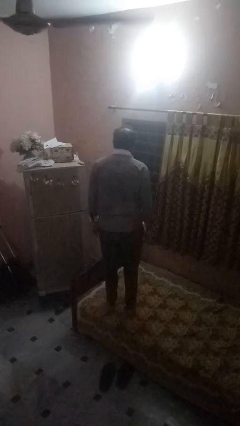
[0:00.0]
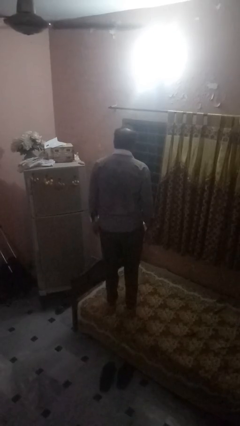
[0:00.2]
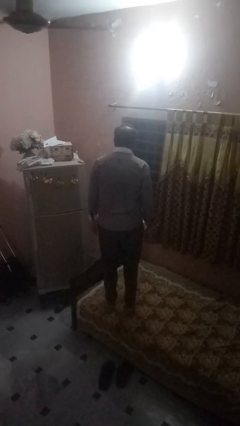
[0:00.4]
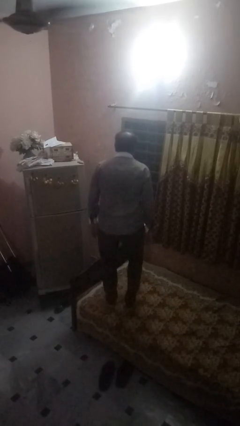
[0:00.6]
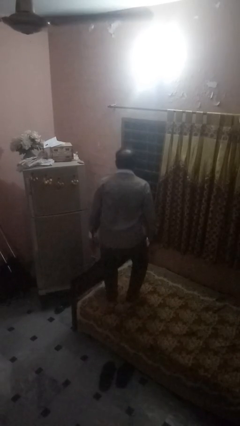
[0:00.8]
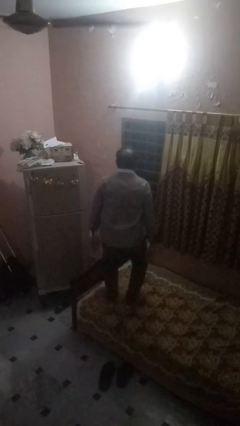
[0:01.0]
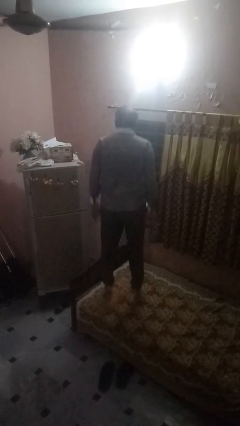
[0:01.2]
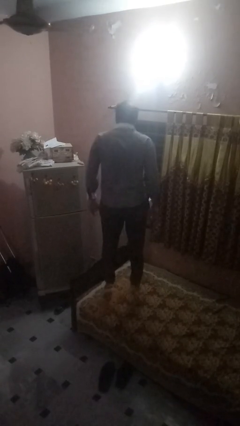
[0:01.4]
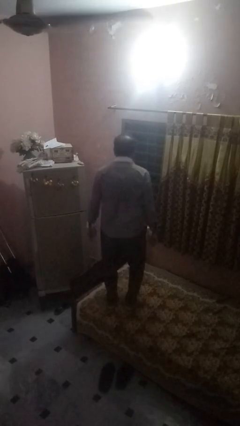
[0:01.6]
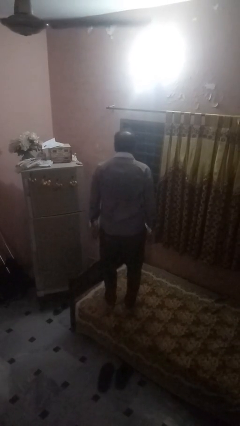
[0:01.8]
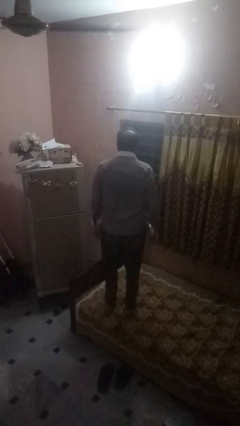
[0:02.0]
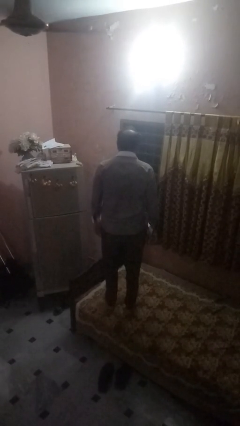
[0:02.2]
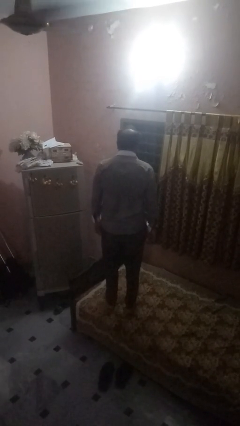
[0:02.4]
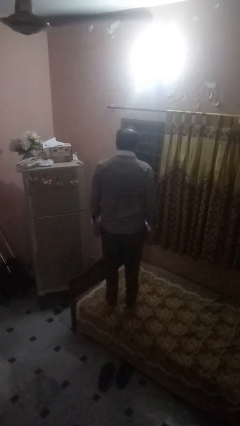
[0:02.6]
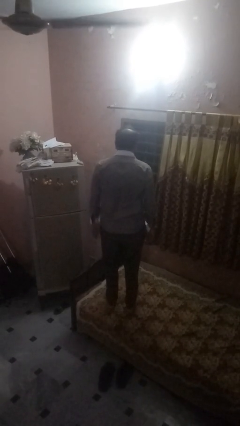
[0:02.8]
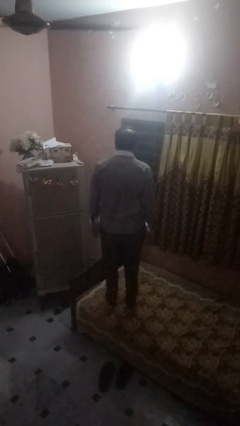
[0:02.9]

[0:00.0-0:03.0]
person jumps on bed

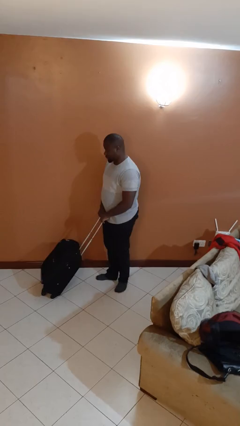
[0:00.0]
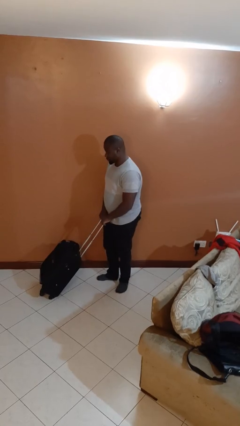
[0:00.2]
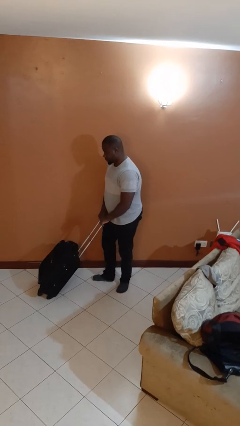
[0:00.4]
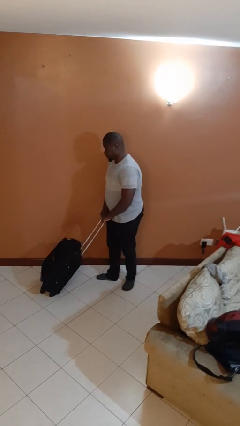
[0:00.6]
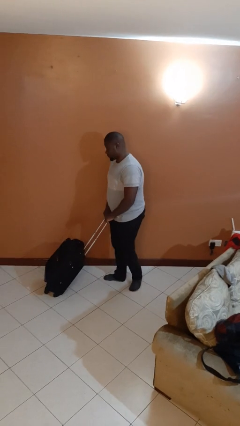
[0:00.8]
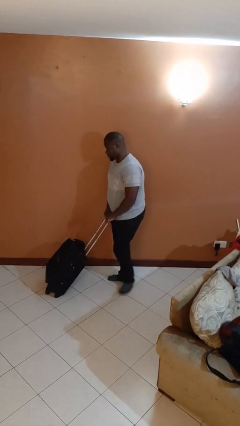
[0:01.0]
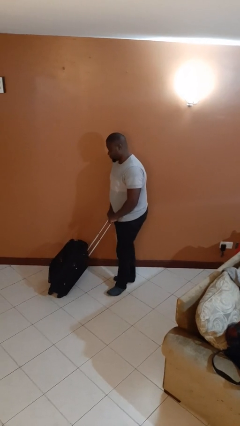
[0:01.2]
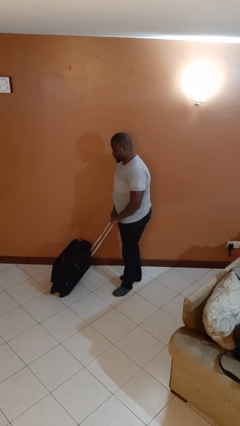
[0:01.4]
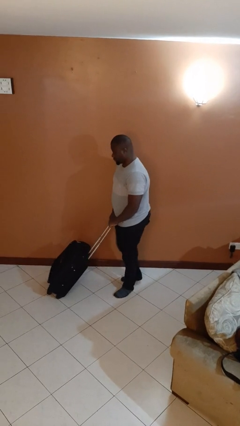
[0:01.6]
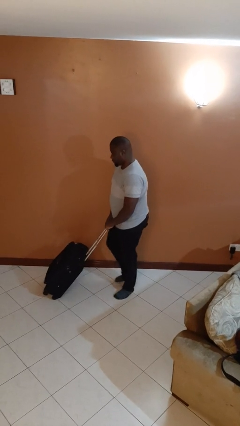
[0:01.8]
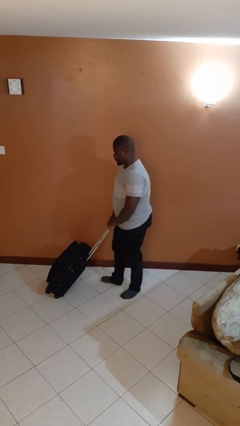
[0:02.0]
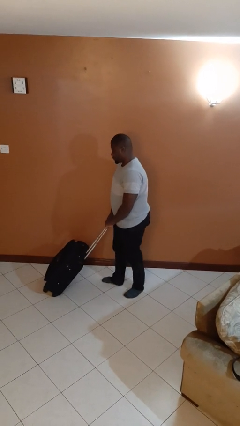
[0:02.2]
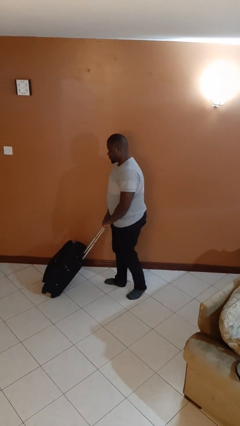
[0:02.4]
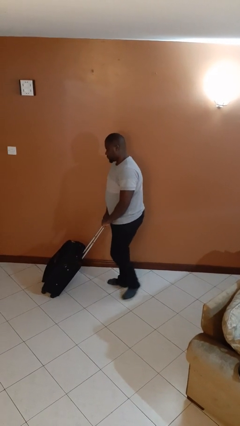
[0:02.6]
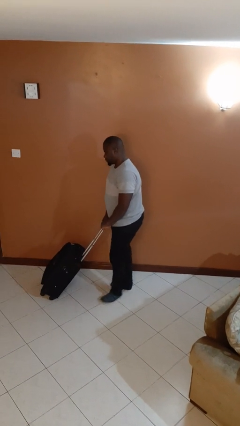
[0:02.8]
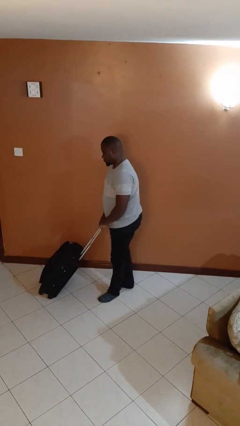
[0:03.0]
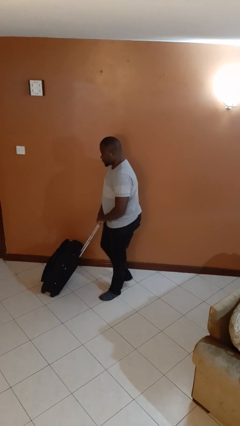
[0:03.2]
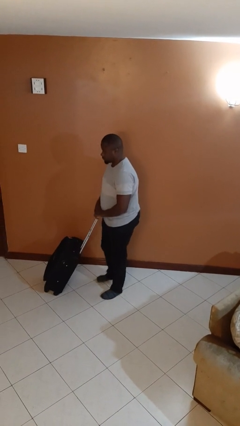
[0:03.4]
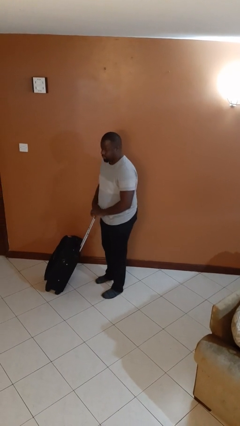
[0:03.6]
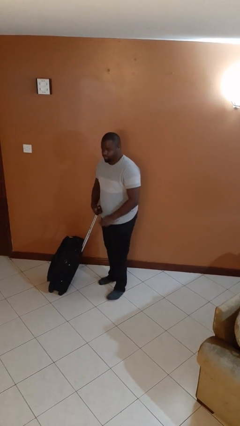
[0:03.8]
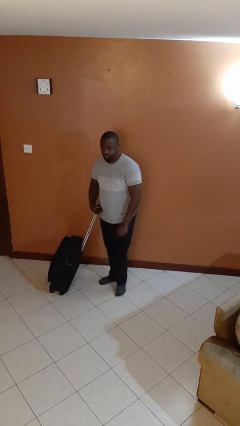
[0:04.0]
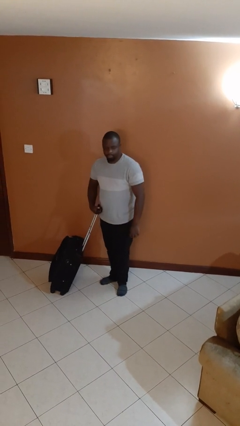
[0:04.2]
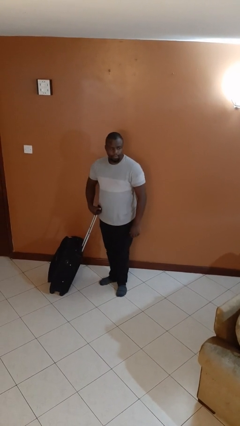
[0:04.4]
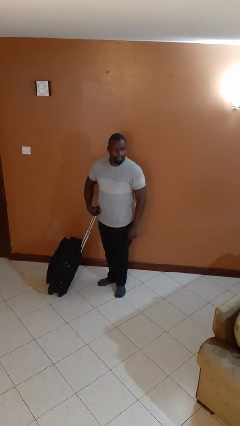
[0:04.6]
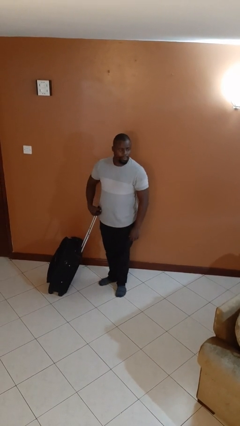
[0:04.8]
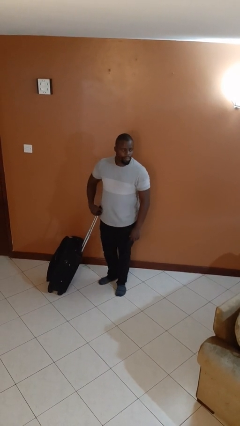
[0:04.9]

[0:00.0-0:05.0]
person pushes wheeled cart

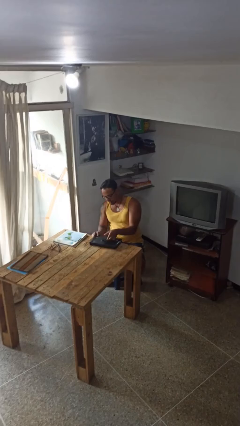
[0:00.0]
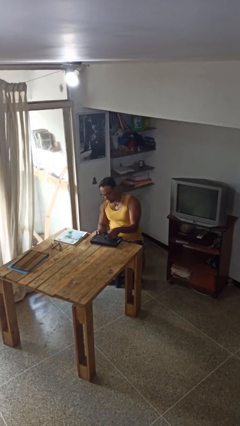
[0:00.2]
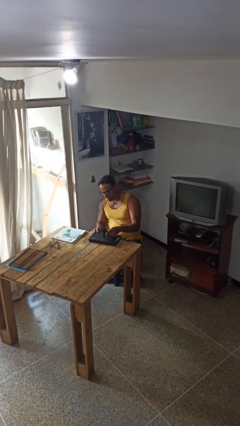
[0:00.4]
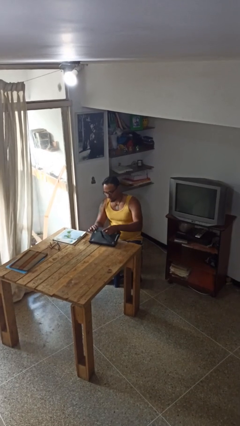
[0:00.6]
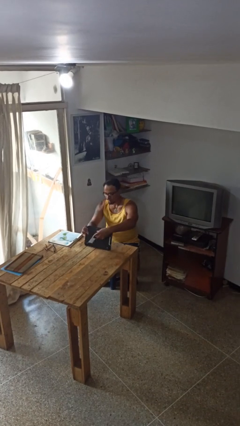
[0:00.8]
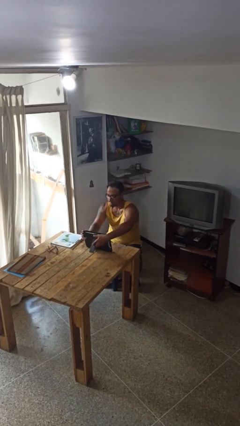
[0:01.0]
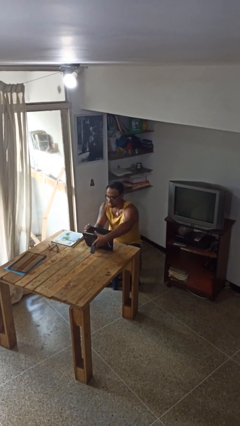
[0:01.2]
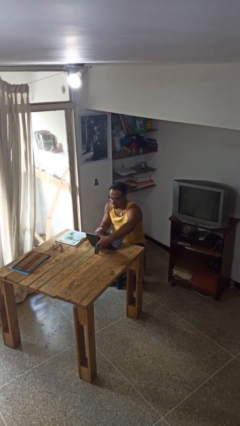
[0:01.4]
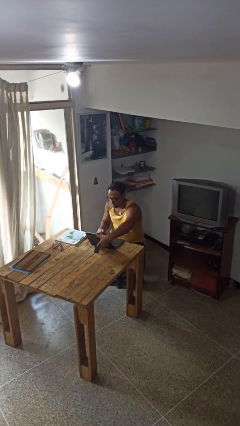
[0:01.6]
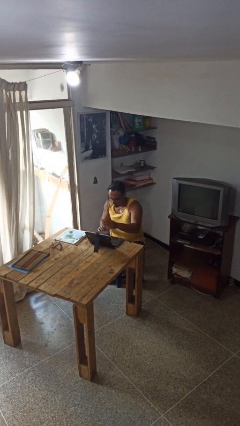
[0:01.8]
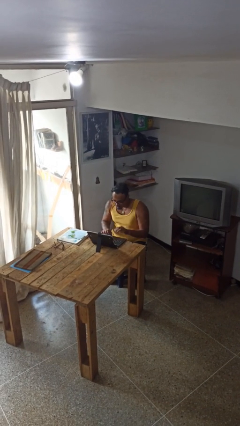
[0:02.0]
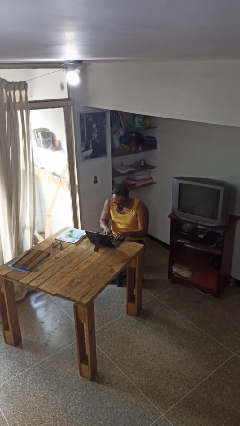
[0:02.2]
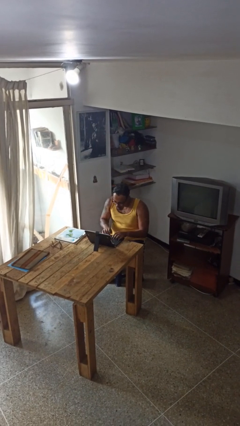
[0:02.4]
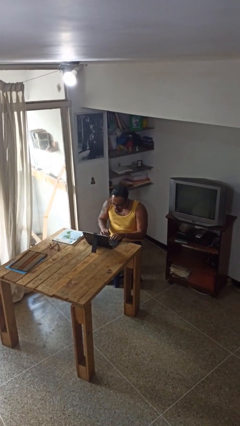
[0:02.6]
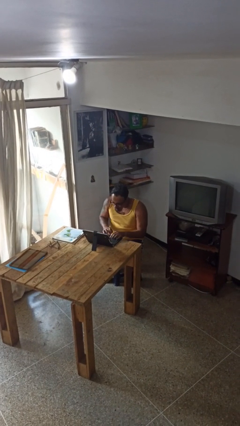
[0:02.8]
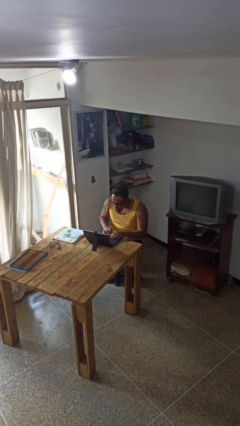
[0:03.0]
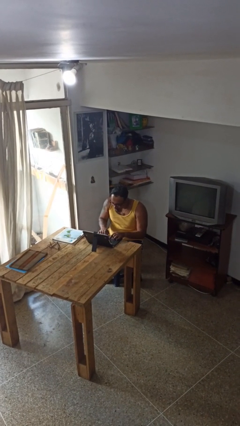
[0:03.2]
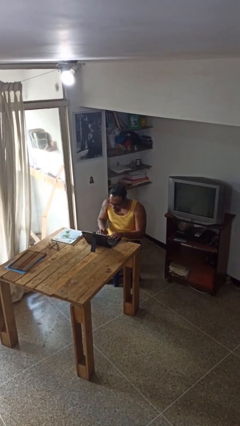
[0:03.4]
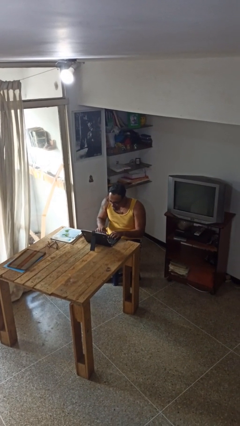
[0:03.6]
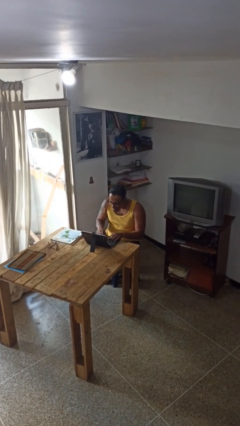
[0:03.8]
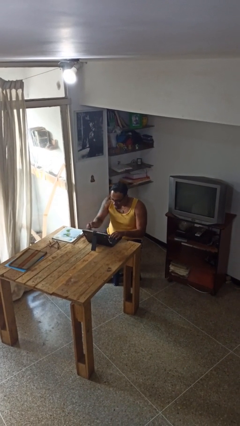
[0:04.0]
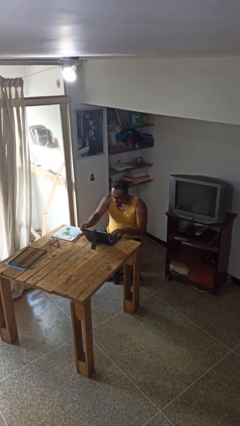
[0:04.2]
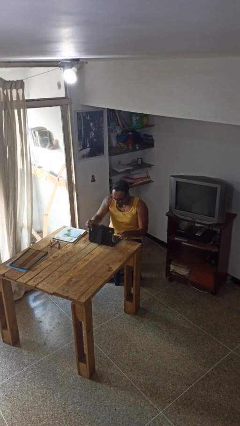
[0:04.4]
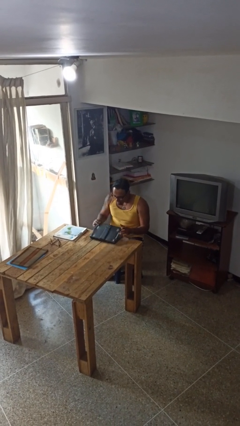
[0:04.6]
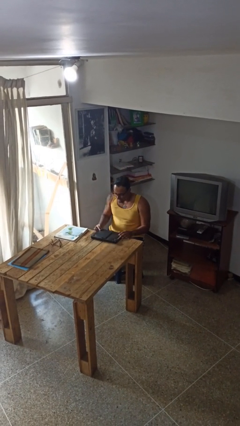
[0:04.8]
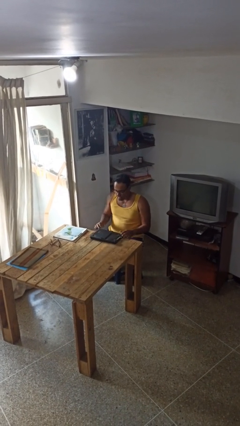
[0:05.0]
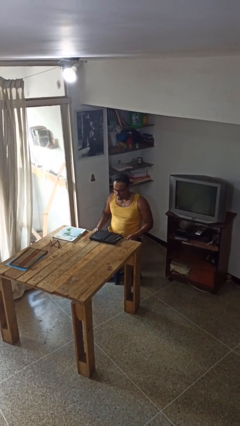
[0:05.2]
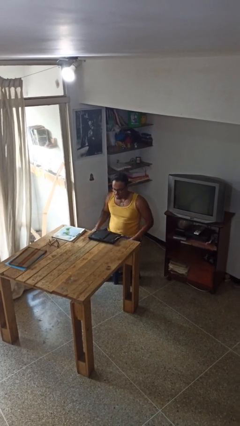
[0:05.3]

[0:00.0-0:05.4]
person interacts with laptop

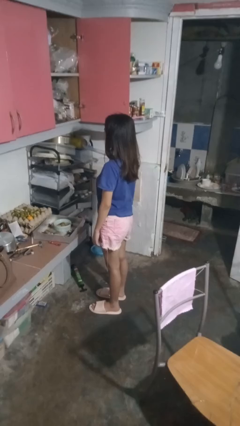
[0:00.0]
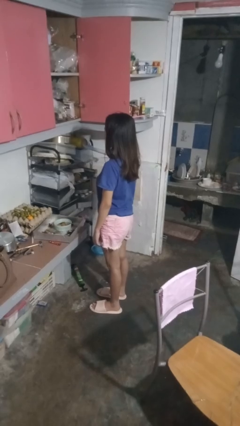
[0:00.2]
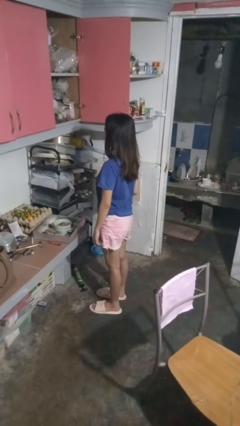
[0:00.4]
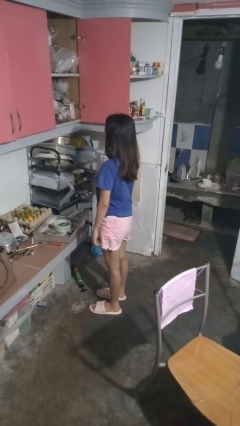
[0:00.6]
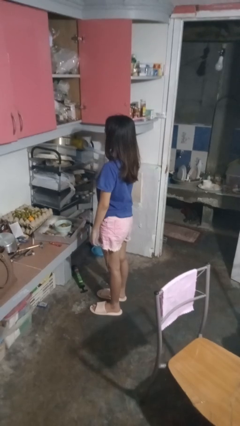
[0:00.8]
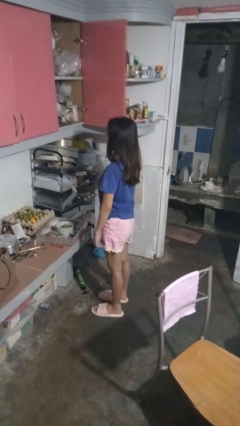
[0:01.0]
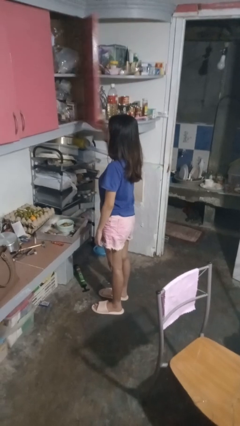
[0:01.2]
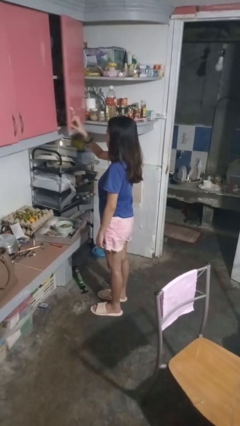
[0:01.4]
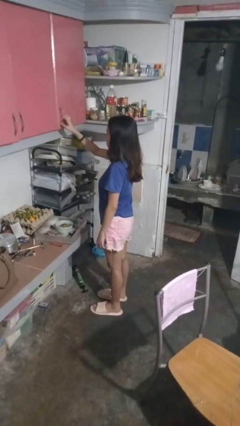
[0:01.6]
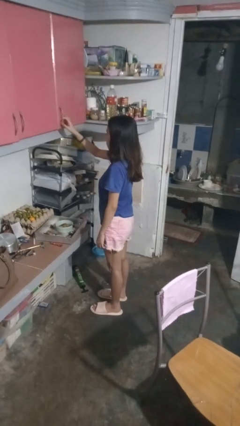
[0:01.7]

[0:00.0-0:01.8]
person closes cabinet

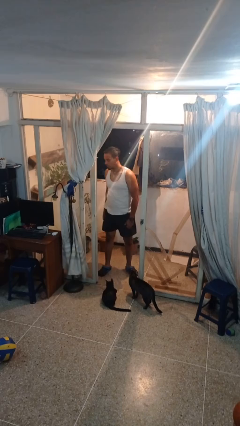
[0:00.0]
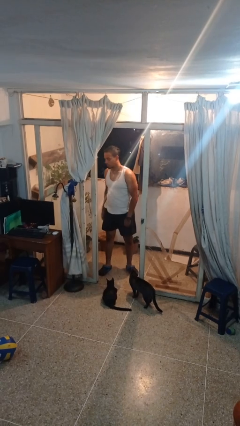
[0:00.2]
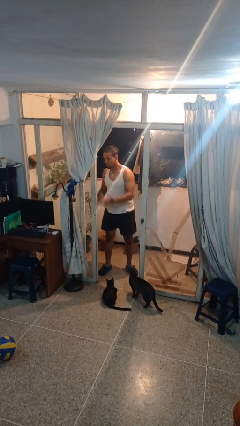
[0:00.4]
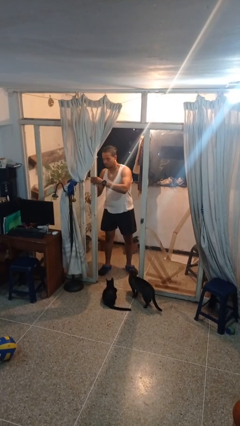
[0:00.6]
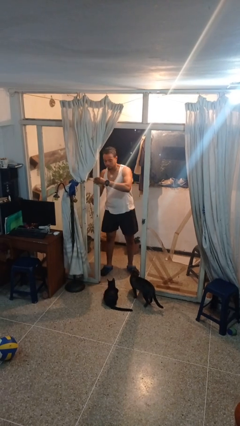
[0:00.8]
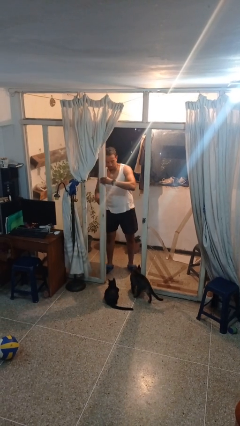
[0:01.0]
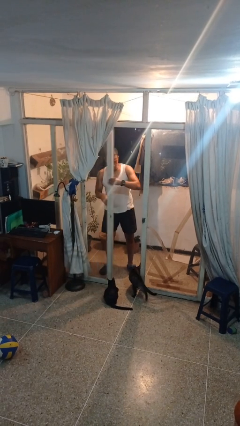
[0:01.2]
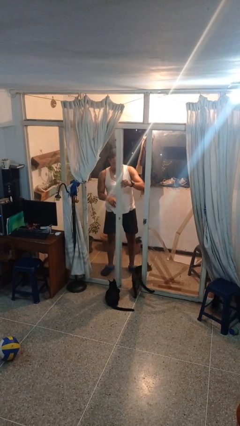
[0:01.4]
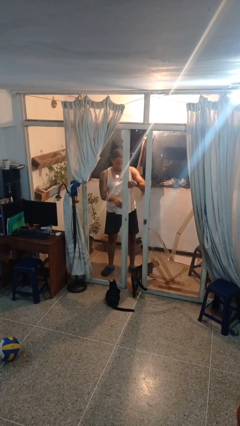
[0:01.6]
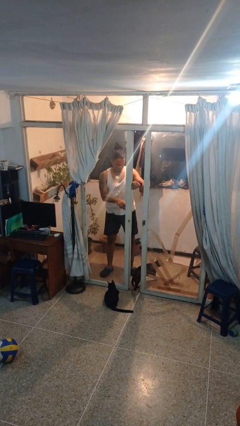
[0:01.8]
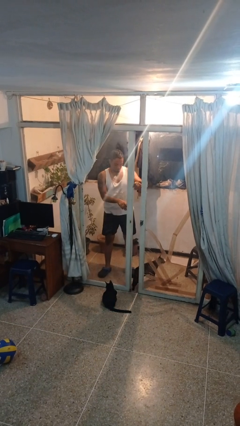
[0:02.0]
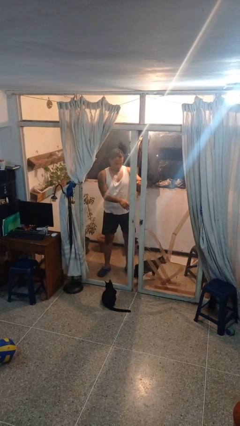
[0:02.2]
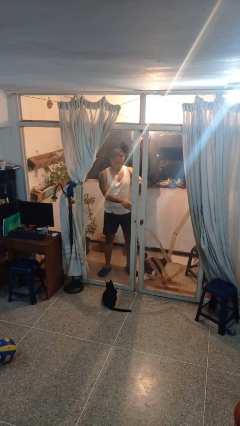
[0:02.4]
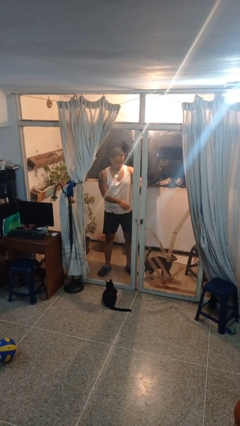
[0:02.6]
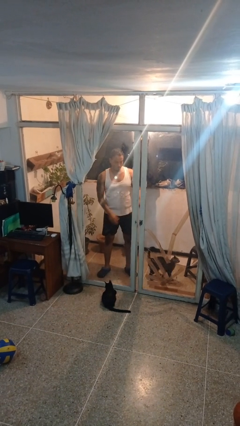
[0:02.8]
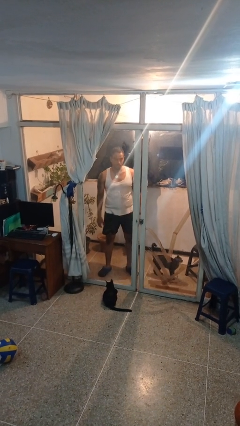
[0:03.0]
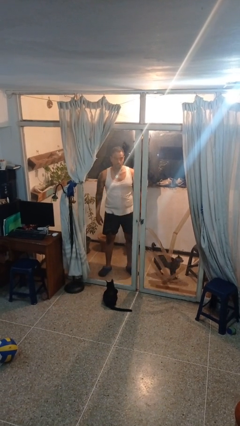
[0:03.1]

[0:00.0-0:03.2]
person closes sliding door
